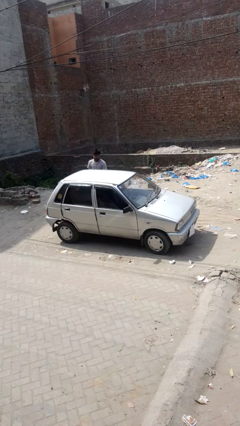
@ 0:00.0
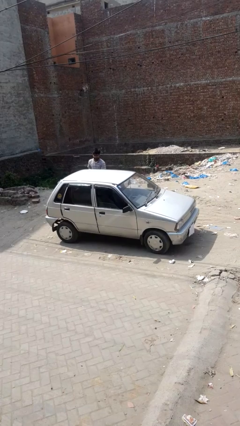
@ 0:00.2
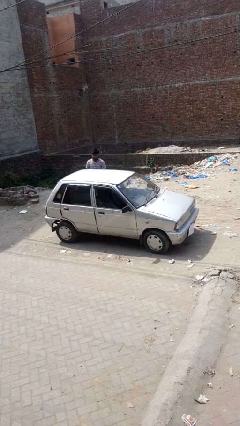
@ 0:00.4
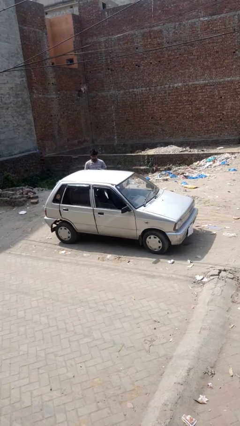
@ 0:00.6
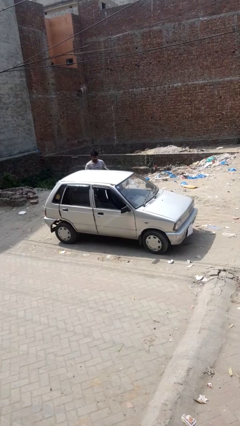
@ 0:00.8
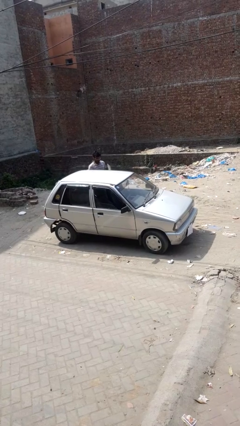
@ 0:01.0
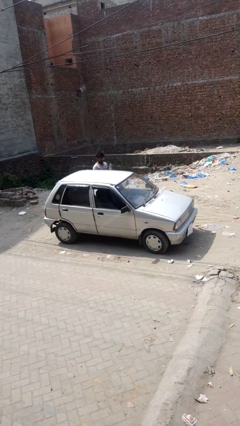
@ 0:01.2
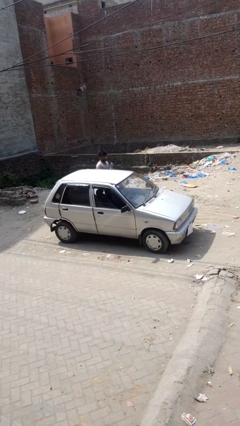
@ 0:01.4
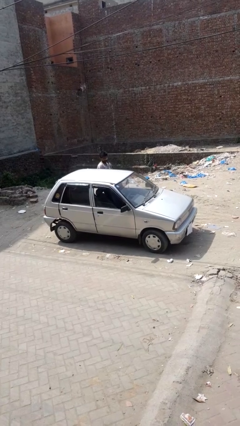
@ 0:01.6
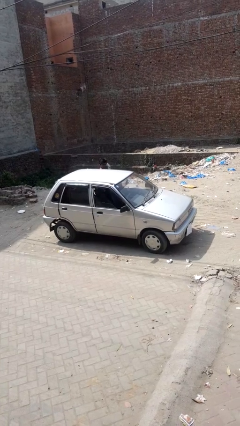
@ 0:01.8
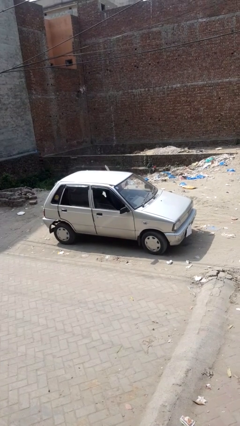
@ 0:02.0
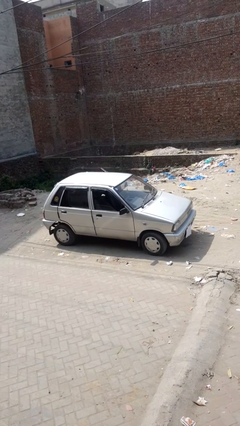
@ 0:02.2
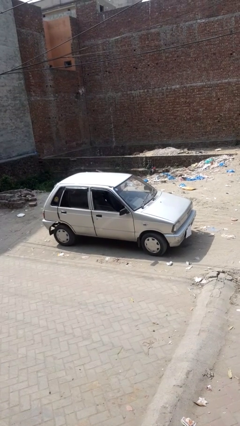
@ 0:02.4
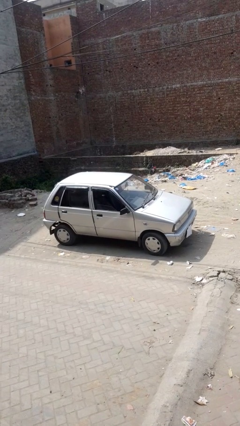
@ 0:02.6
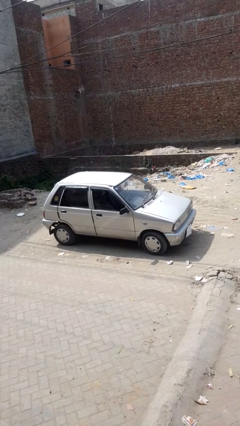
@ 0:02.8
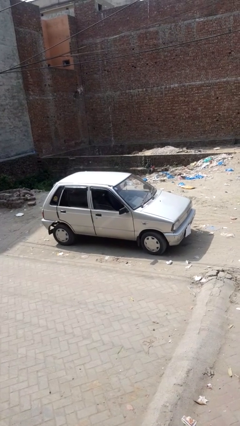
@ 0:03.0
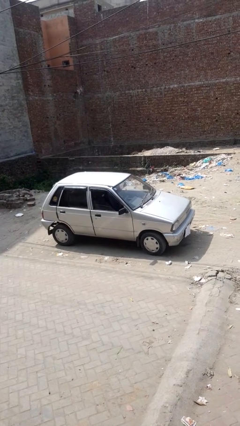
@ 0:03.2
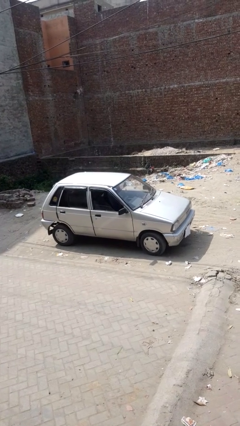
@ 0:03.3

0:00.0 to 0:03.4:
car picks up person

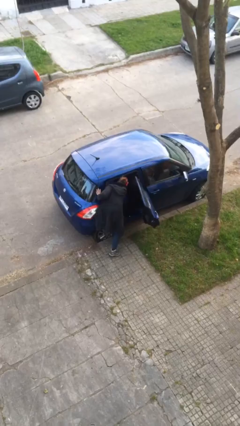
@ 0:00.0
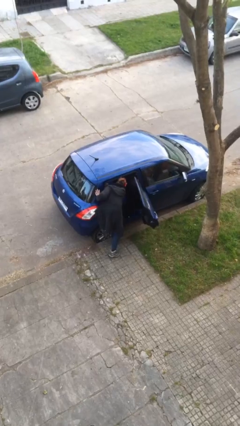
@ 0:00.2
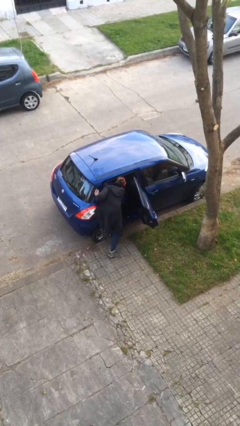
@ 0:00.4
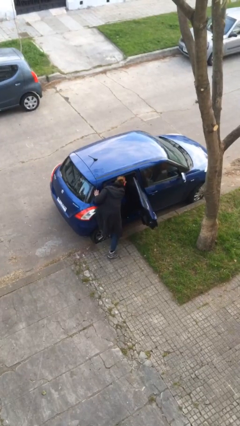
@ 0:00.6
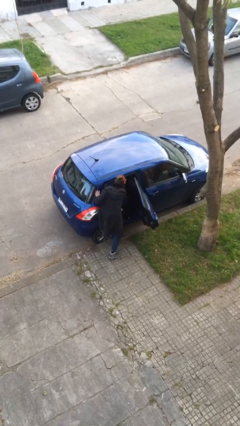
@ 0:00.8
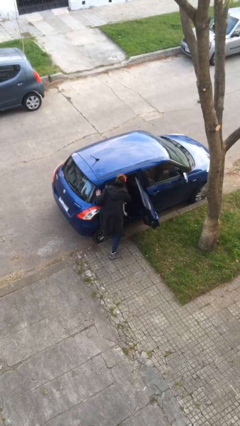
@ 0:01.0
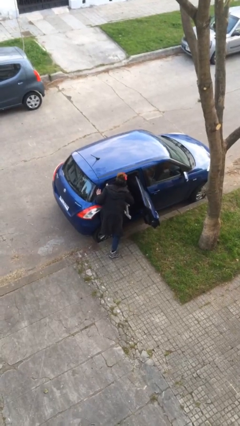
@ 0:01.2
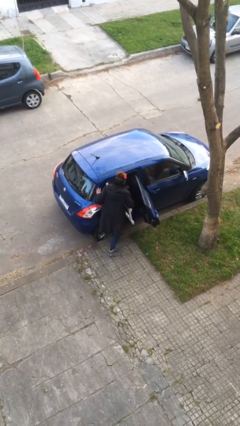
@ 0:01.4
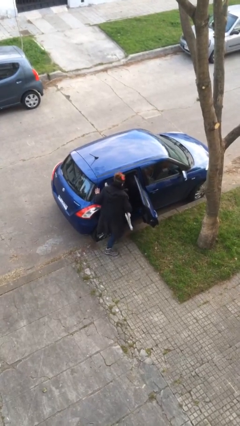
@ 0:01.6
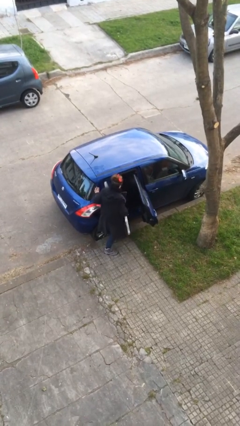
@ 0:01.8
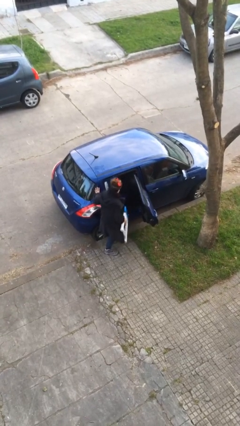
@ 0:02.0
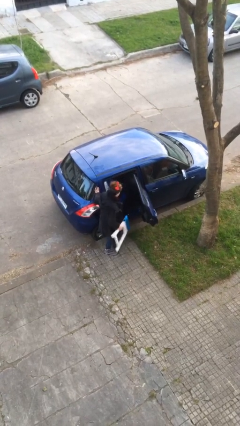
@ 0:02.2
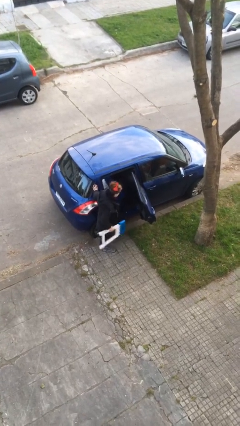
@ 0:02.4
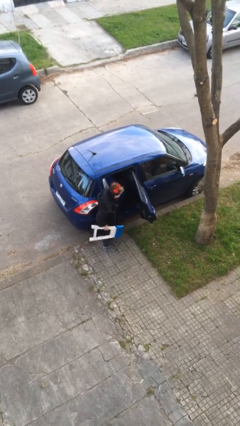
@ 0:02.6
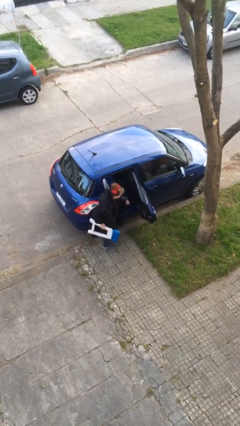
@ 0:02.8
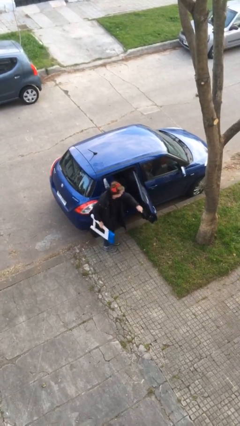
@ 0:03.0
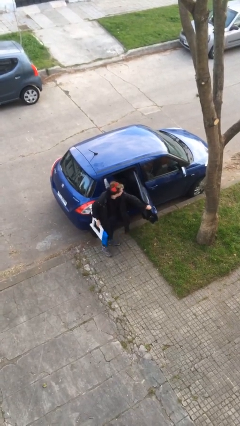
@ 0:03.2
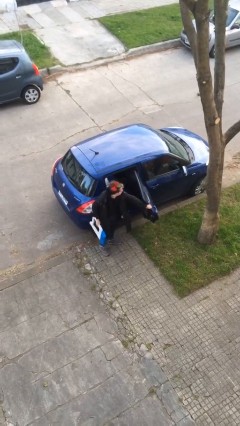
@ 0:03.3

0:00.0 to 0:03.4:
person unloads car

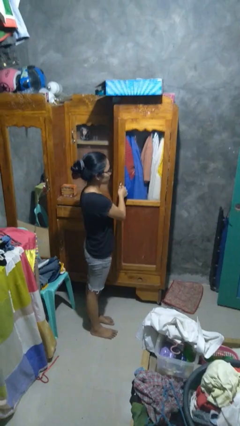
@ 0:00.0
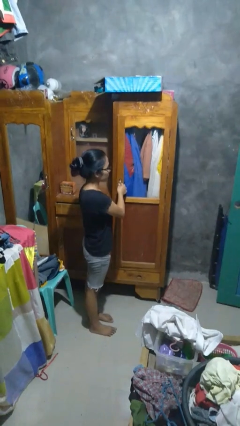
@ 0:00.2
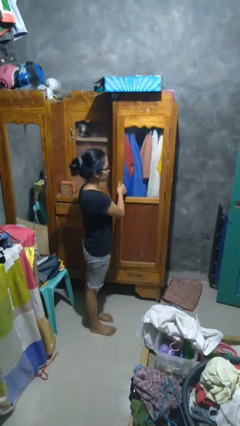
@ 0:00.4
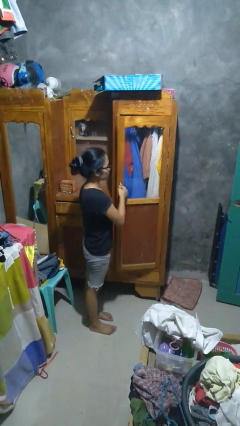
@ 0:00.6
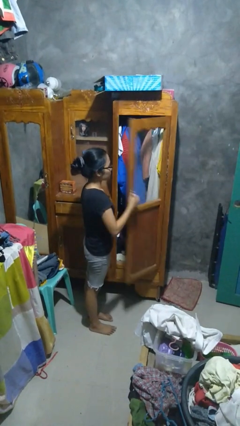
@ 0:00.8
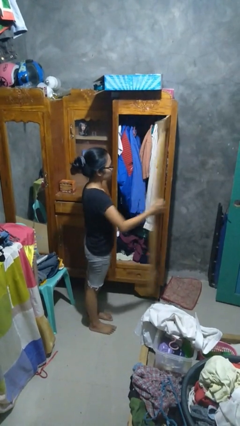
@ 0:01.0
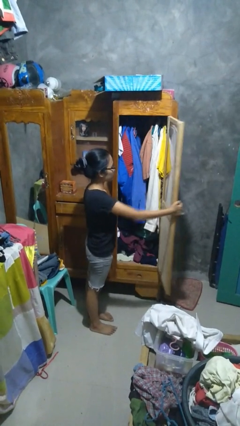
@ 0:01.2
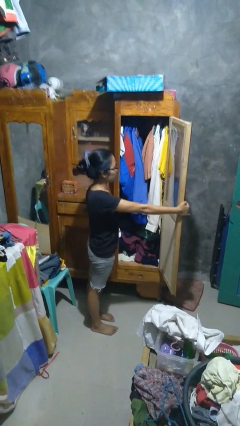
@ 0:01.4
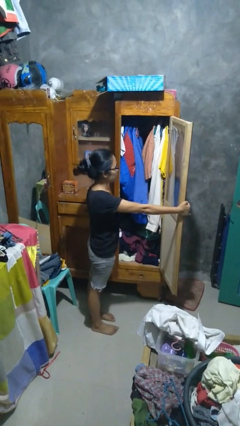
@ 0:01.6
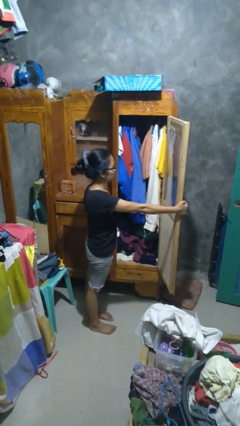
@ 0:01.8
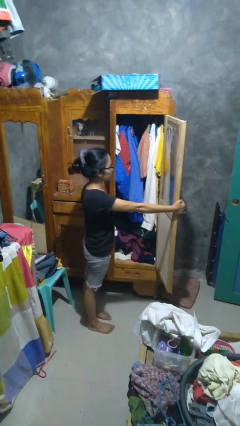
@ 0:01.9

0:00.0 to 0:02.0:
person opens closet door

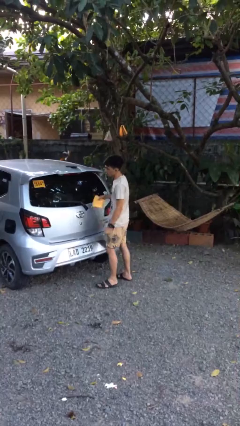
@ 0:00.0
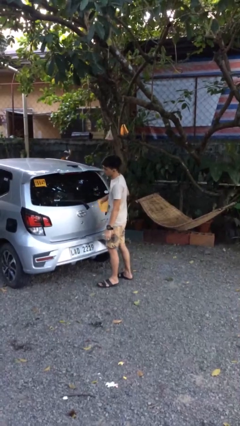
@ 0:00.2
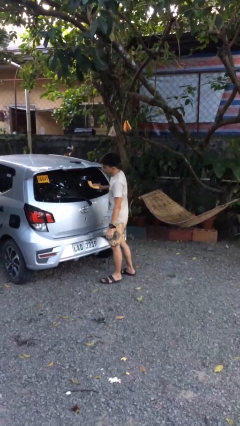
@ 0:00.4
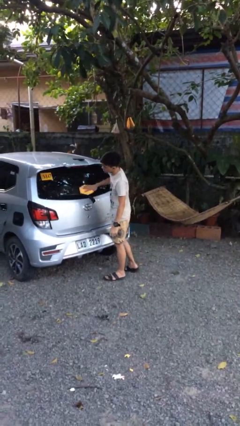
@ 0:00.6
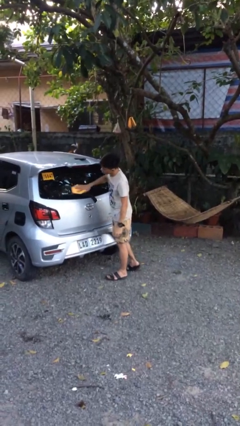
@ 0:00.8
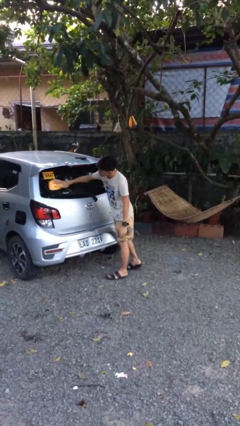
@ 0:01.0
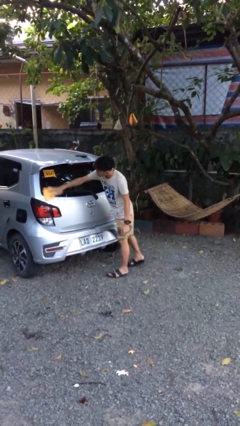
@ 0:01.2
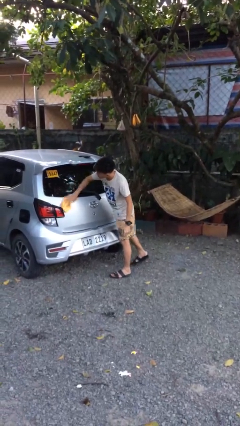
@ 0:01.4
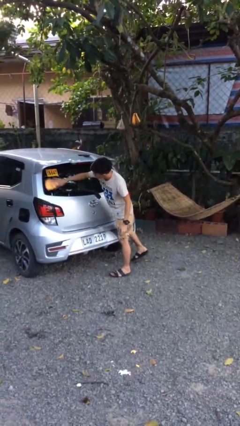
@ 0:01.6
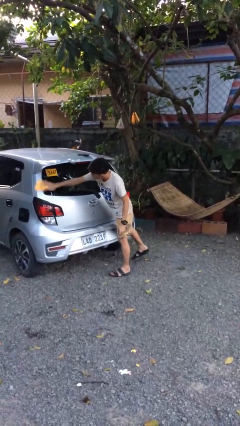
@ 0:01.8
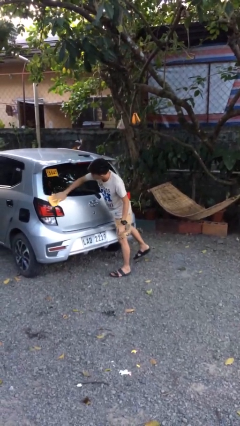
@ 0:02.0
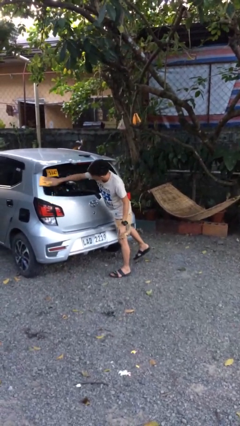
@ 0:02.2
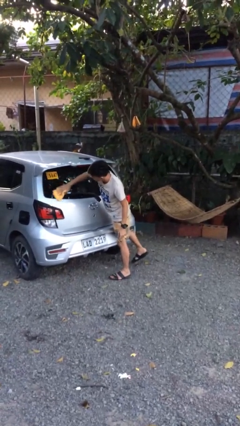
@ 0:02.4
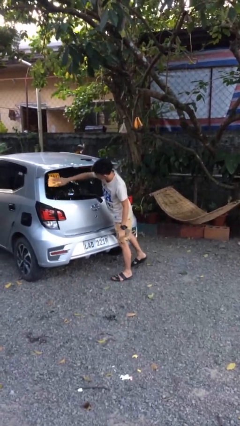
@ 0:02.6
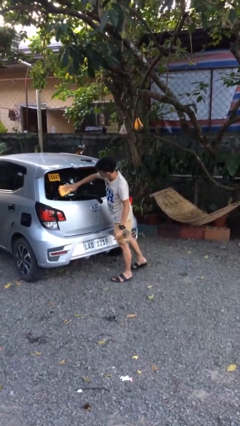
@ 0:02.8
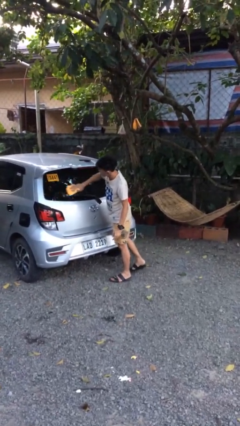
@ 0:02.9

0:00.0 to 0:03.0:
person polishes car with rag

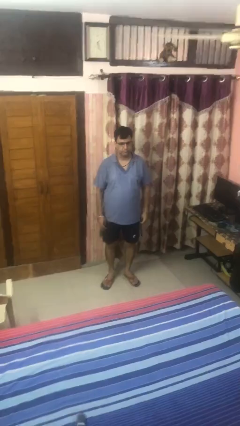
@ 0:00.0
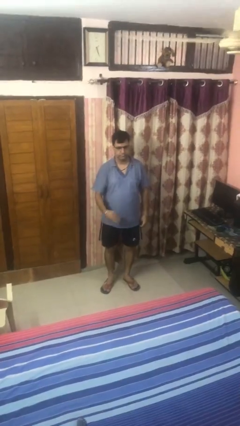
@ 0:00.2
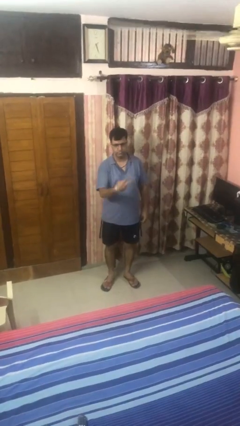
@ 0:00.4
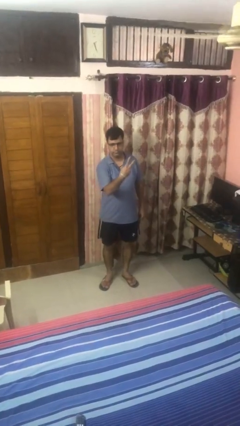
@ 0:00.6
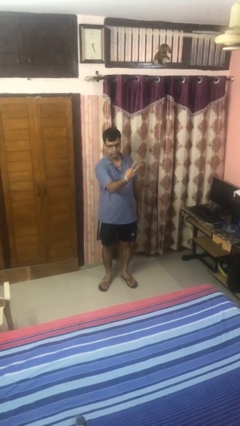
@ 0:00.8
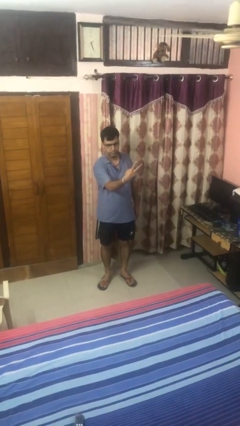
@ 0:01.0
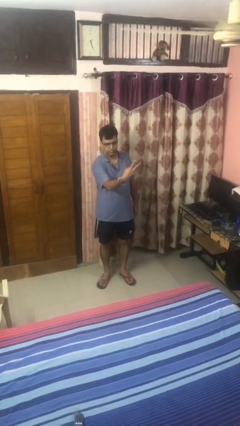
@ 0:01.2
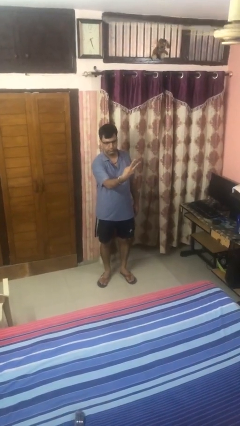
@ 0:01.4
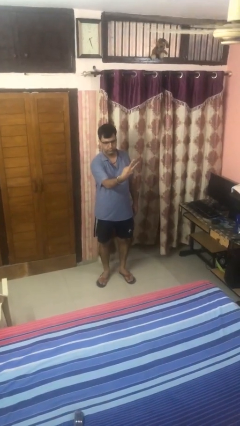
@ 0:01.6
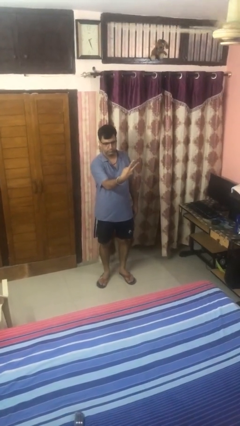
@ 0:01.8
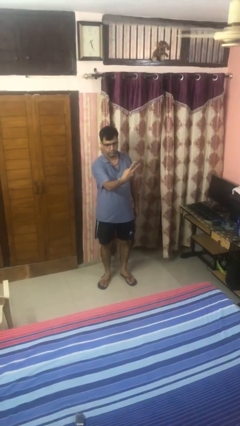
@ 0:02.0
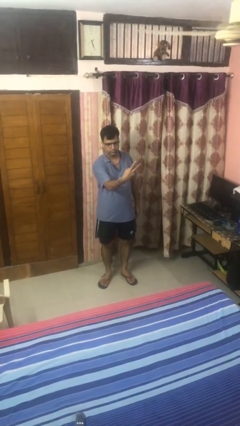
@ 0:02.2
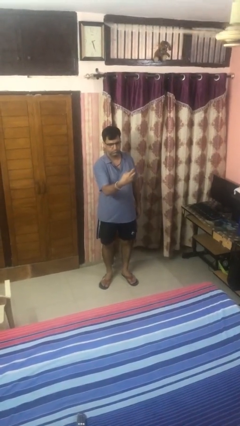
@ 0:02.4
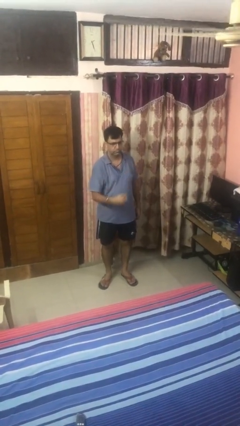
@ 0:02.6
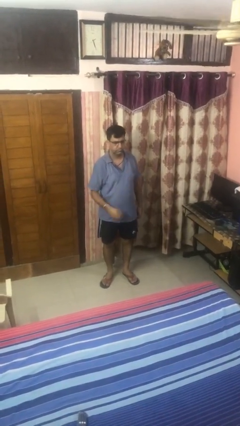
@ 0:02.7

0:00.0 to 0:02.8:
person gestures peace

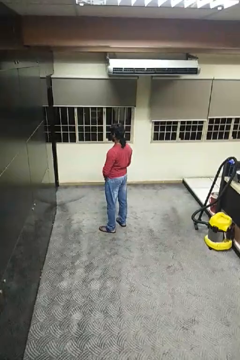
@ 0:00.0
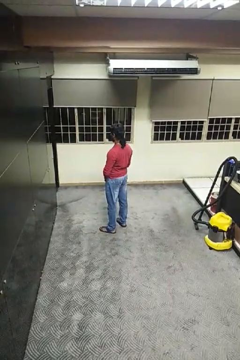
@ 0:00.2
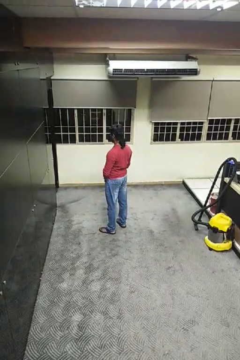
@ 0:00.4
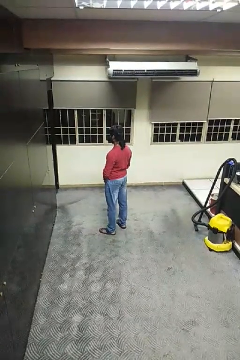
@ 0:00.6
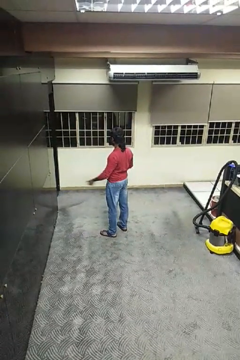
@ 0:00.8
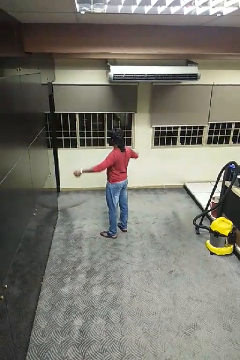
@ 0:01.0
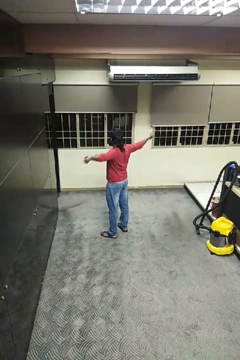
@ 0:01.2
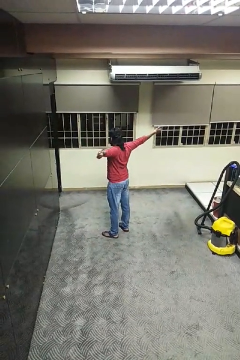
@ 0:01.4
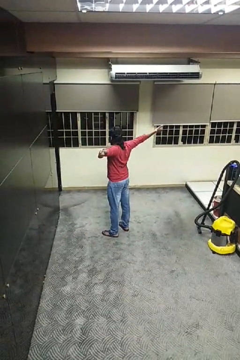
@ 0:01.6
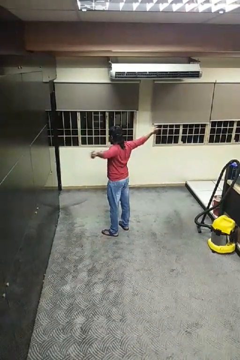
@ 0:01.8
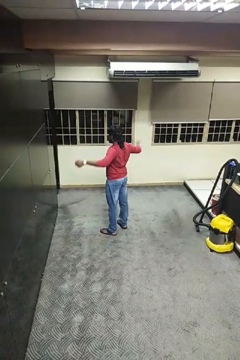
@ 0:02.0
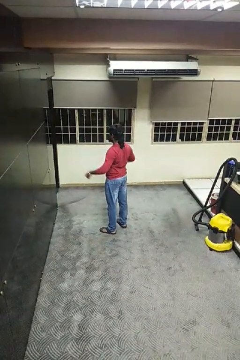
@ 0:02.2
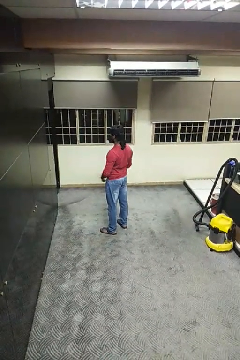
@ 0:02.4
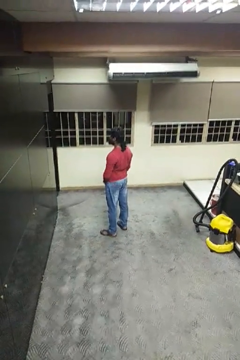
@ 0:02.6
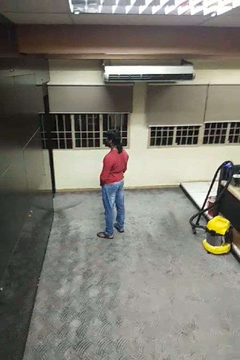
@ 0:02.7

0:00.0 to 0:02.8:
person stretches arms to side

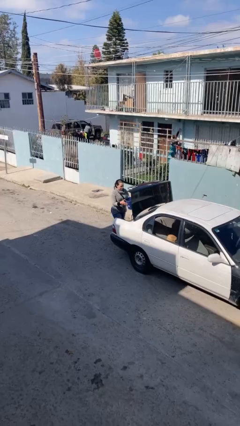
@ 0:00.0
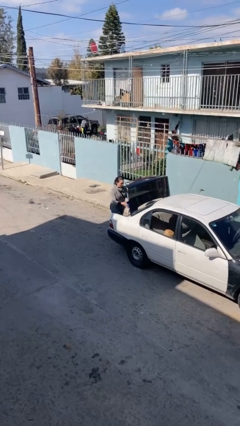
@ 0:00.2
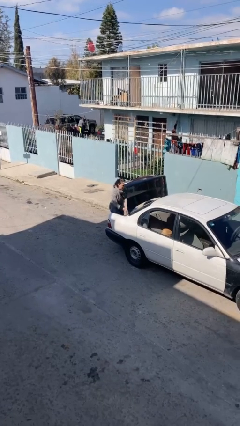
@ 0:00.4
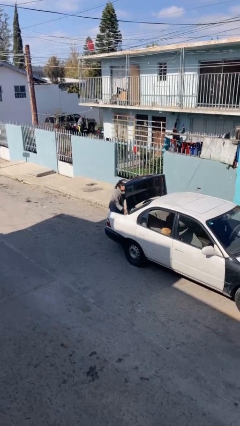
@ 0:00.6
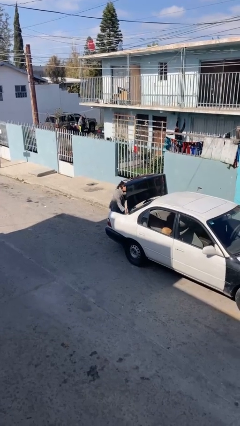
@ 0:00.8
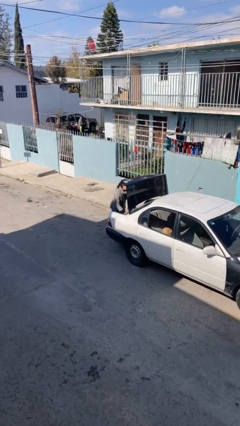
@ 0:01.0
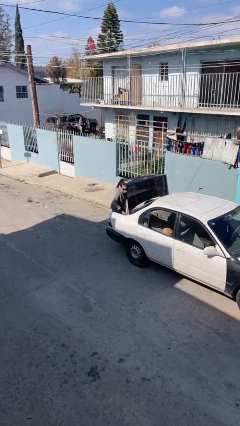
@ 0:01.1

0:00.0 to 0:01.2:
person loads car
